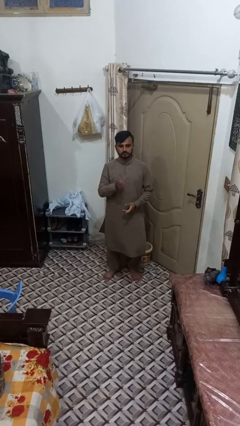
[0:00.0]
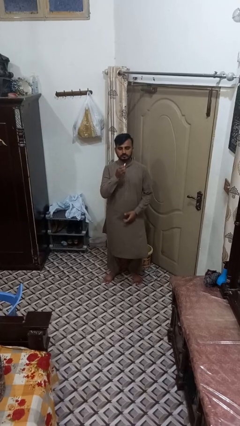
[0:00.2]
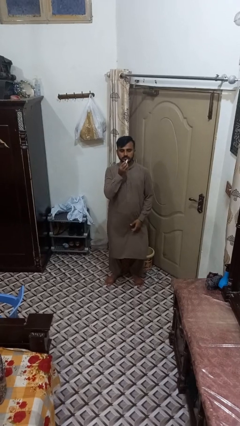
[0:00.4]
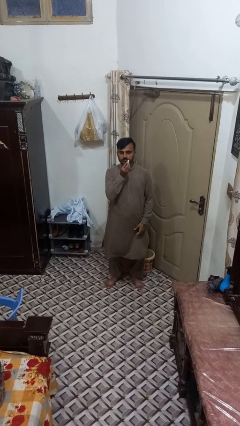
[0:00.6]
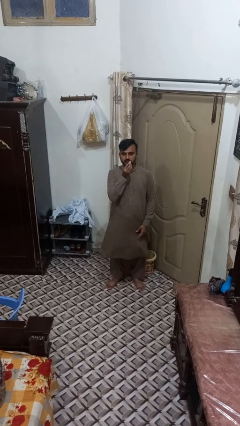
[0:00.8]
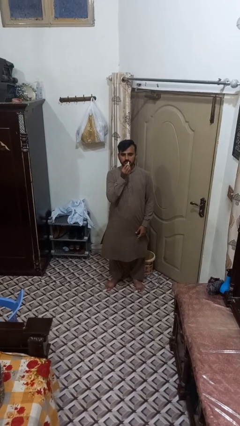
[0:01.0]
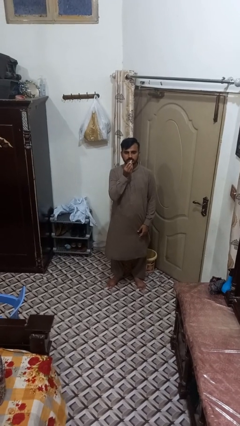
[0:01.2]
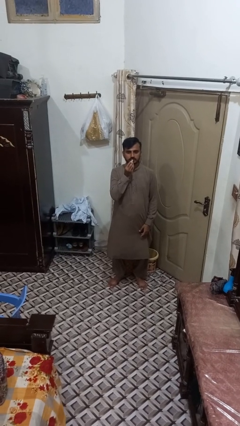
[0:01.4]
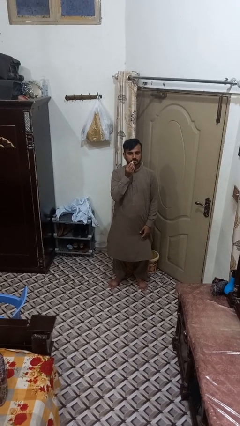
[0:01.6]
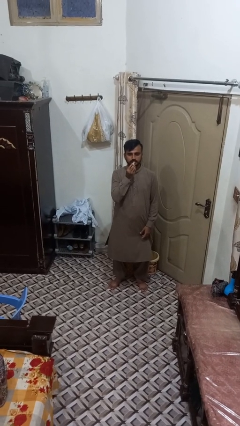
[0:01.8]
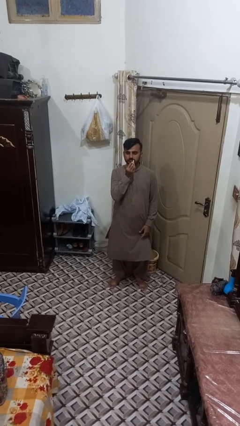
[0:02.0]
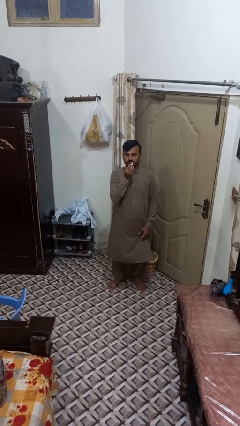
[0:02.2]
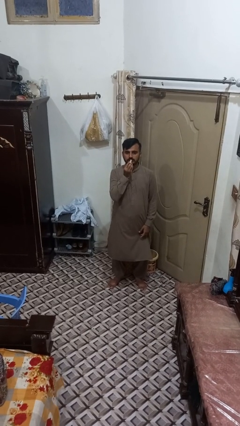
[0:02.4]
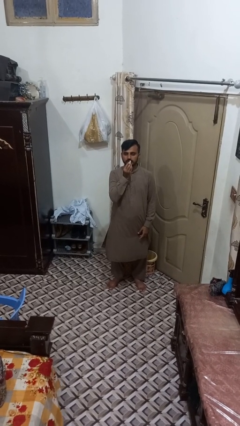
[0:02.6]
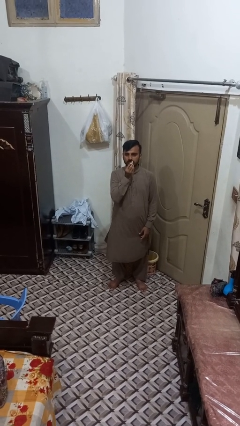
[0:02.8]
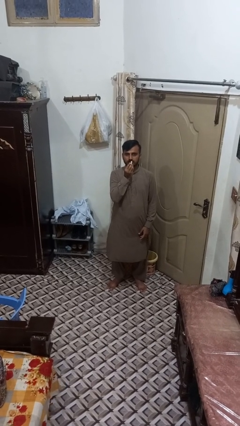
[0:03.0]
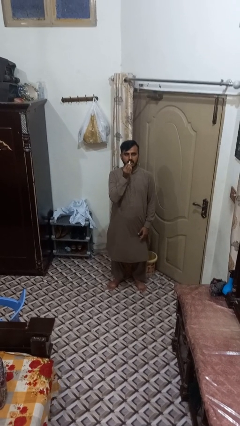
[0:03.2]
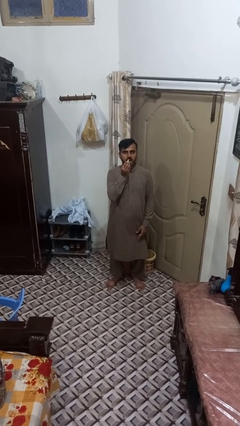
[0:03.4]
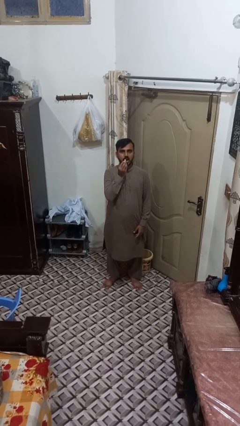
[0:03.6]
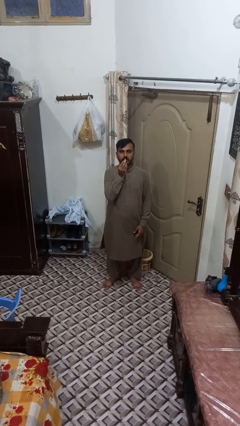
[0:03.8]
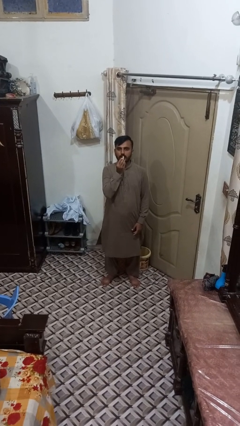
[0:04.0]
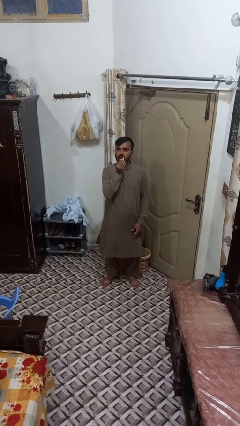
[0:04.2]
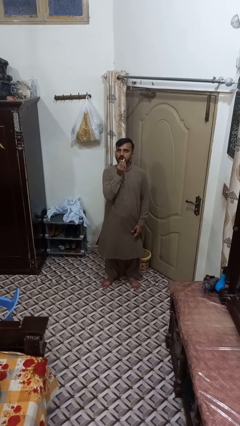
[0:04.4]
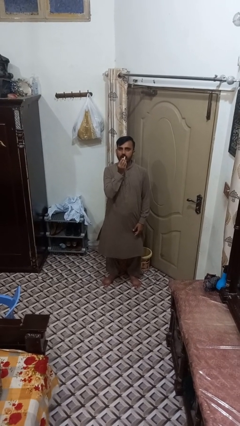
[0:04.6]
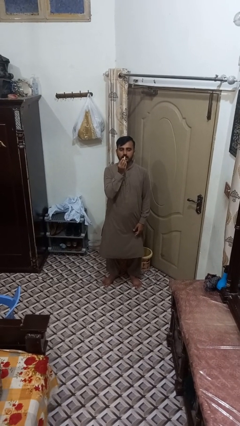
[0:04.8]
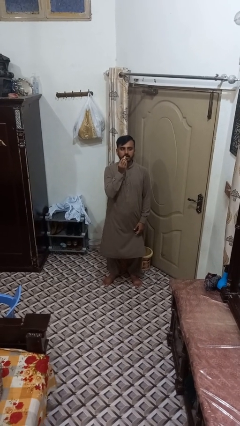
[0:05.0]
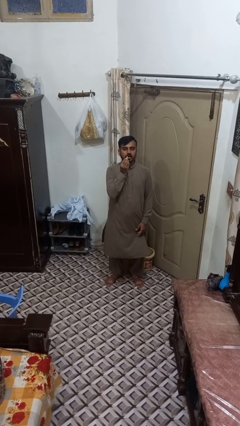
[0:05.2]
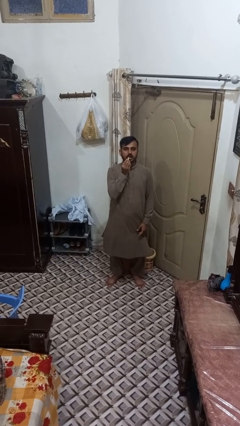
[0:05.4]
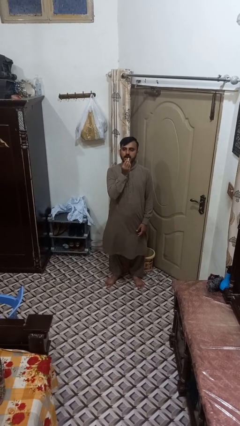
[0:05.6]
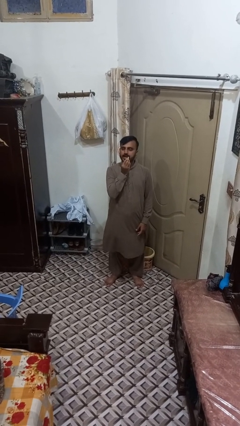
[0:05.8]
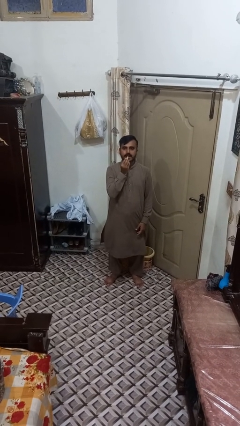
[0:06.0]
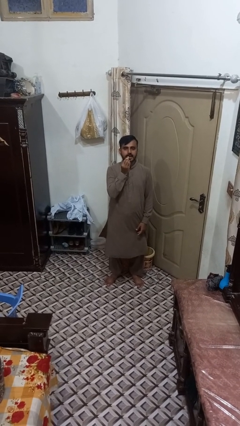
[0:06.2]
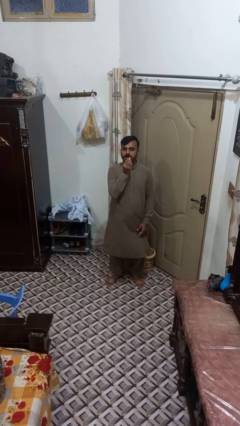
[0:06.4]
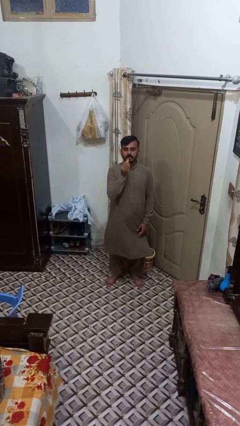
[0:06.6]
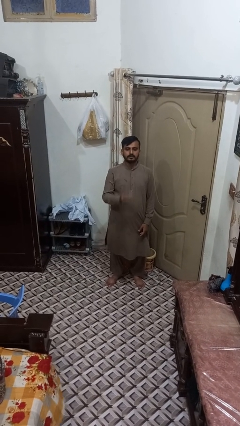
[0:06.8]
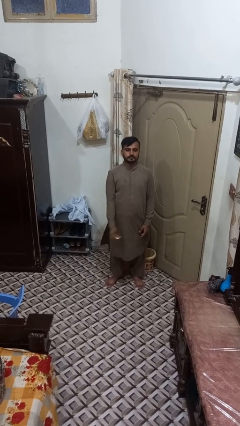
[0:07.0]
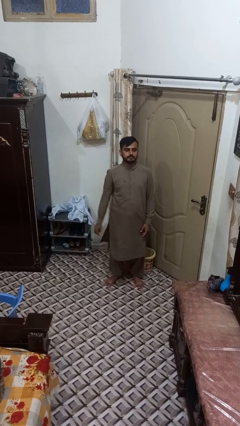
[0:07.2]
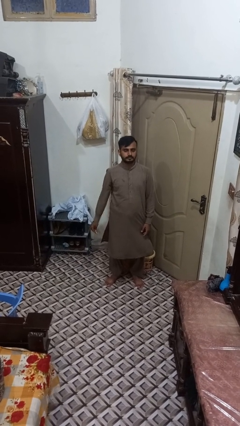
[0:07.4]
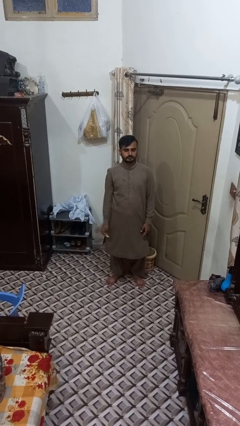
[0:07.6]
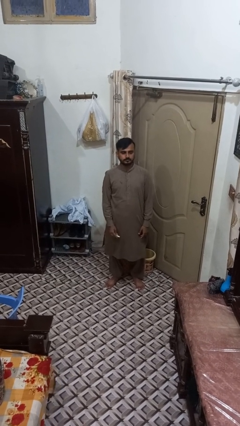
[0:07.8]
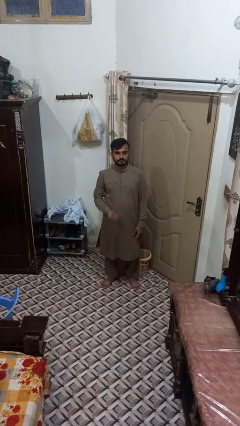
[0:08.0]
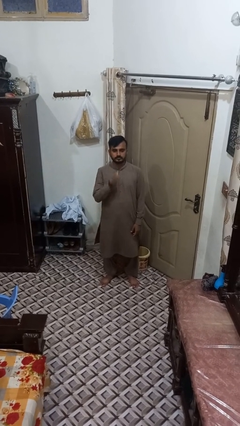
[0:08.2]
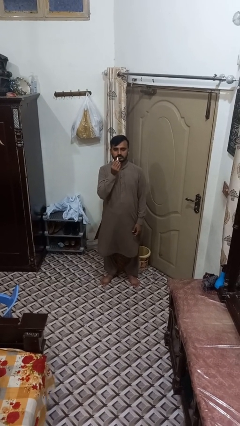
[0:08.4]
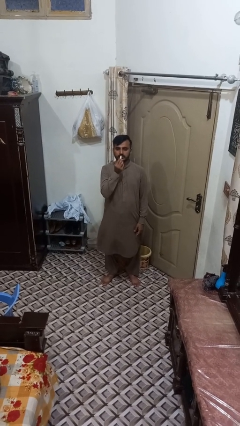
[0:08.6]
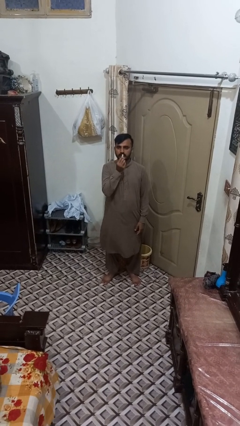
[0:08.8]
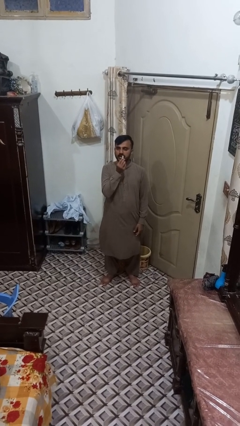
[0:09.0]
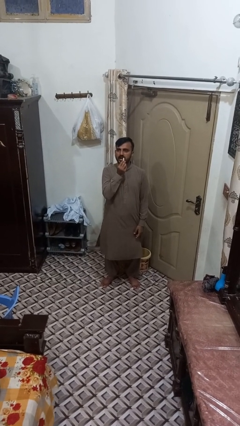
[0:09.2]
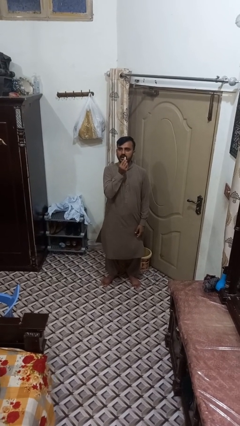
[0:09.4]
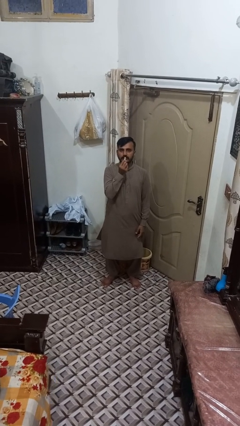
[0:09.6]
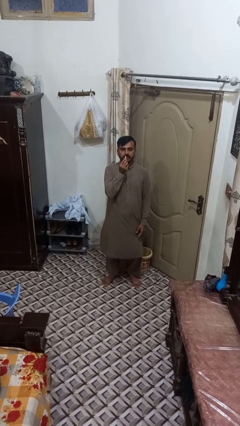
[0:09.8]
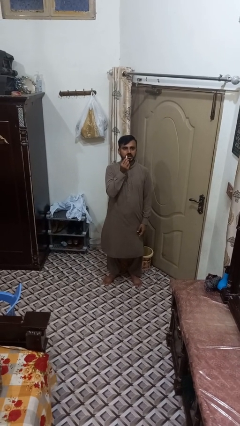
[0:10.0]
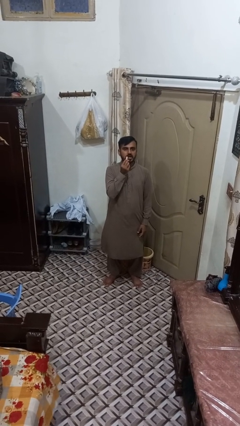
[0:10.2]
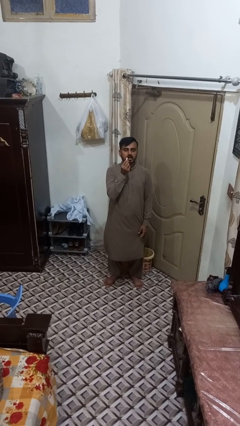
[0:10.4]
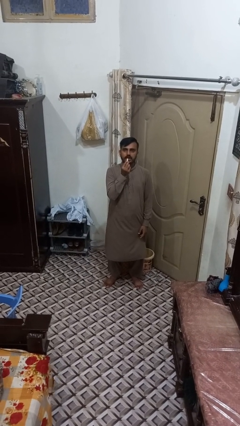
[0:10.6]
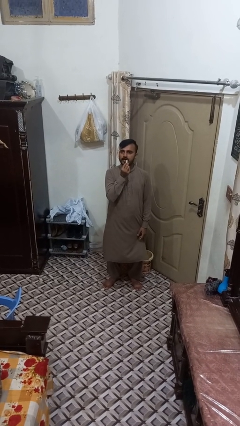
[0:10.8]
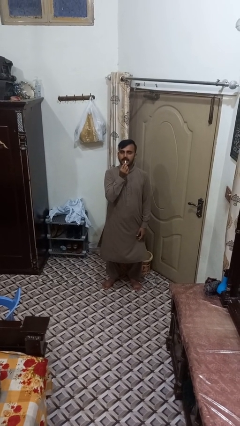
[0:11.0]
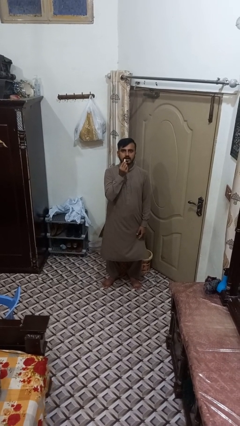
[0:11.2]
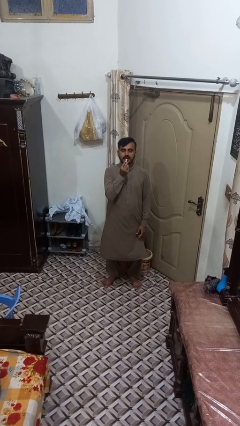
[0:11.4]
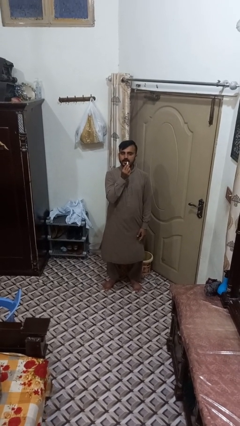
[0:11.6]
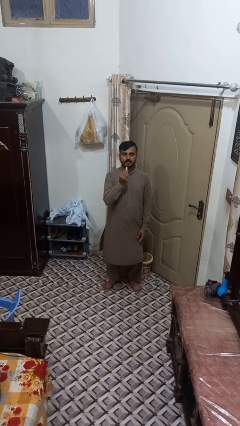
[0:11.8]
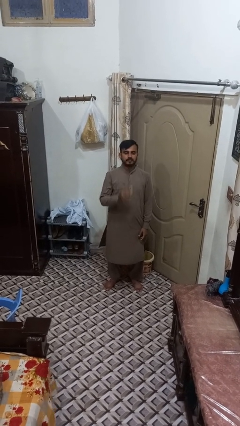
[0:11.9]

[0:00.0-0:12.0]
person applies lip makeup

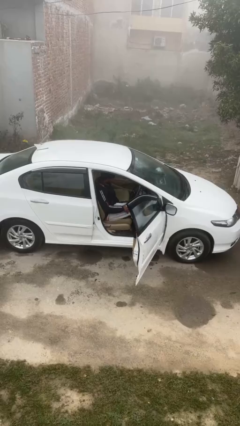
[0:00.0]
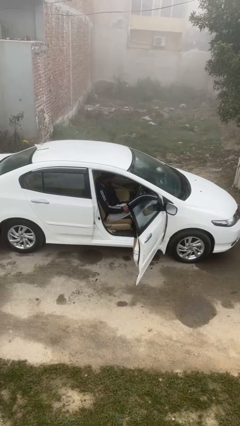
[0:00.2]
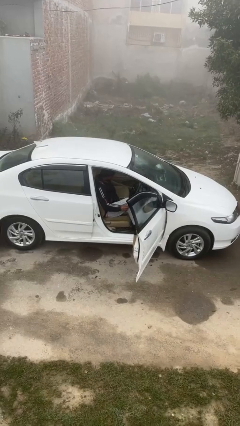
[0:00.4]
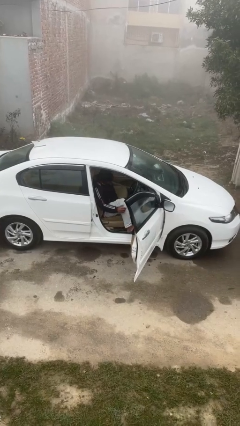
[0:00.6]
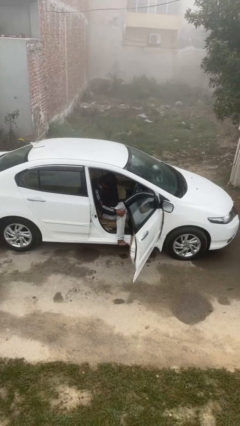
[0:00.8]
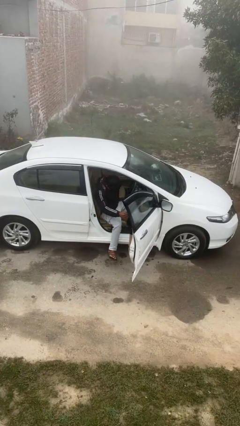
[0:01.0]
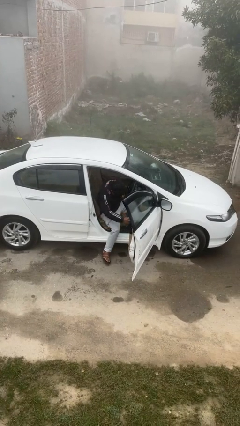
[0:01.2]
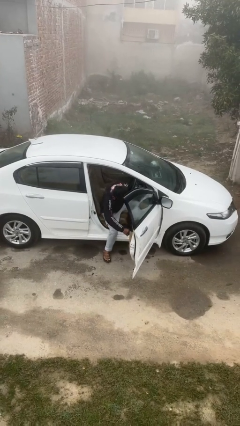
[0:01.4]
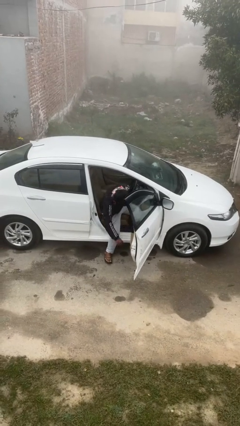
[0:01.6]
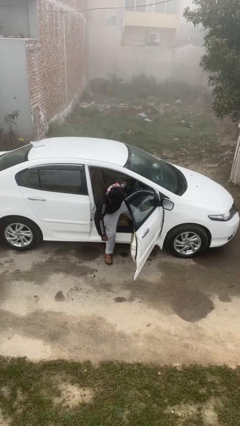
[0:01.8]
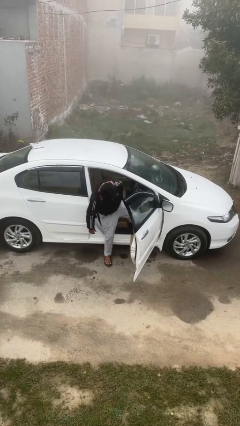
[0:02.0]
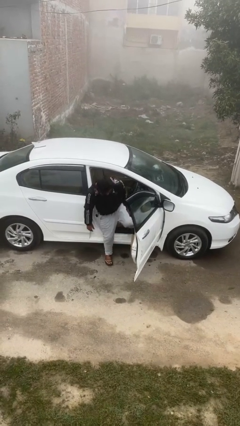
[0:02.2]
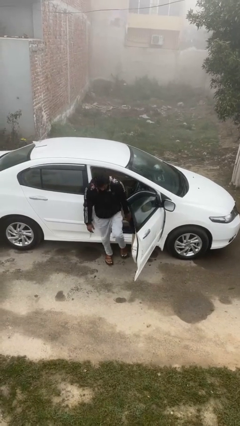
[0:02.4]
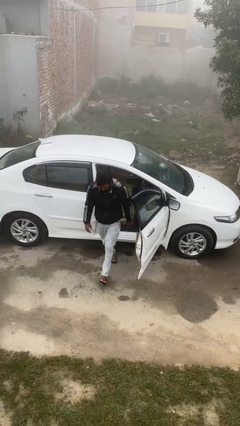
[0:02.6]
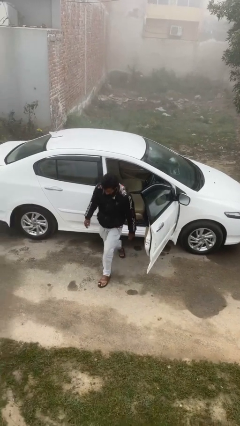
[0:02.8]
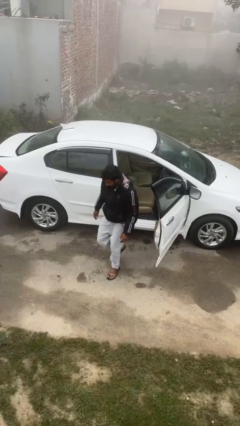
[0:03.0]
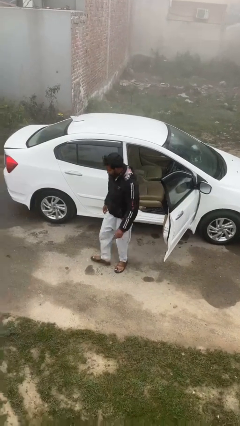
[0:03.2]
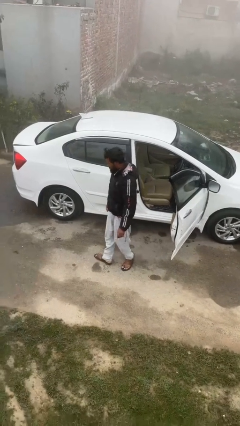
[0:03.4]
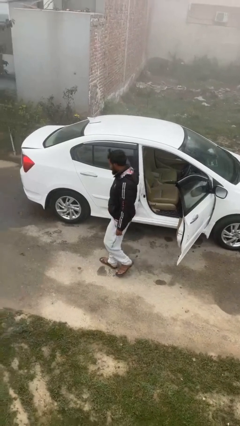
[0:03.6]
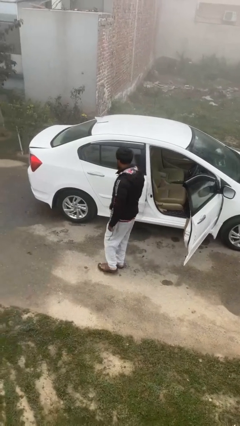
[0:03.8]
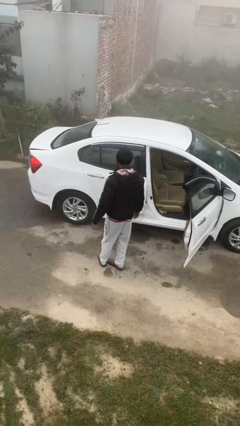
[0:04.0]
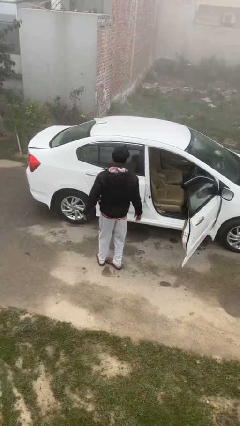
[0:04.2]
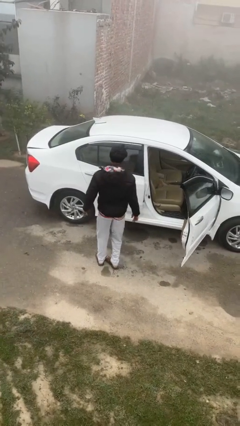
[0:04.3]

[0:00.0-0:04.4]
person exits car

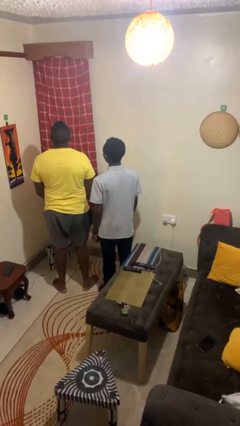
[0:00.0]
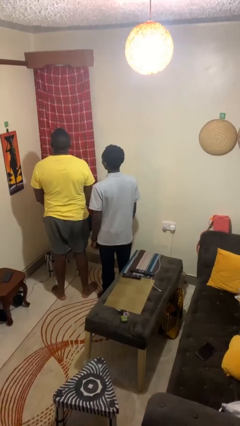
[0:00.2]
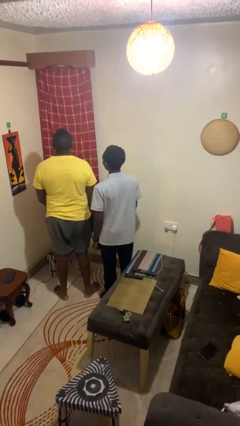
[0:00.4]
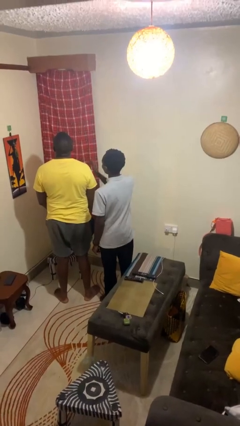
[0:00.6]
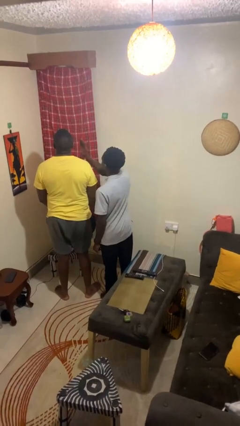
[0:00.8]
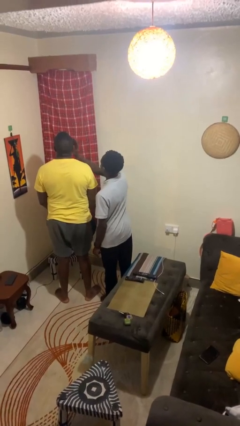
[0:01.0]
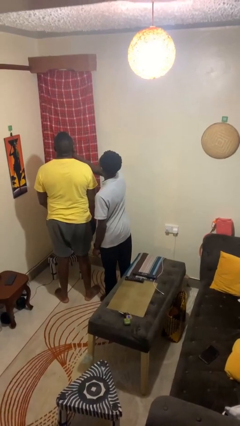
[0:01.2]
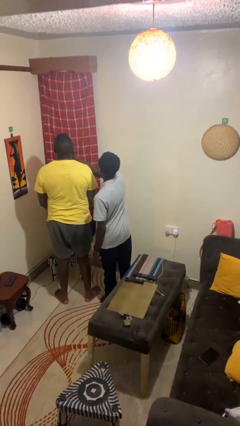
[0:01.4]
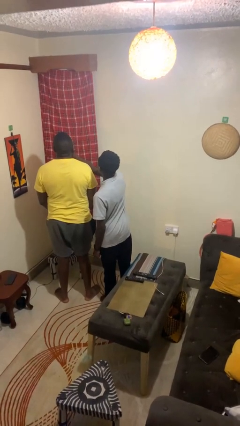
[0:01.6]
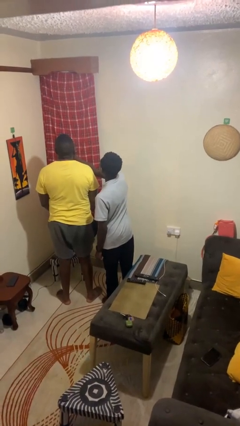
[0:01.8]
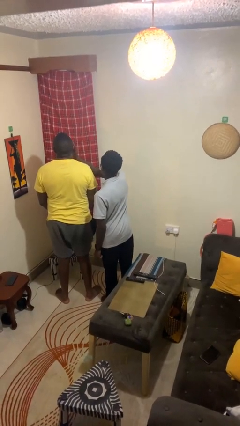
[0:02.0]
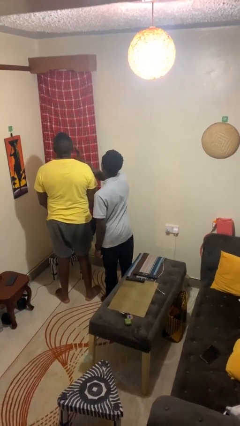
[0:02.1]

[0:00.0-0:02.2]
person touches face of person
